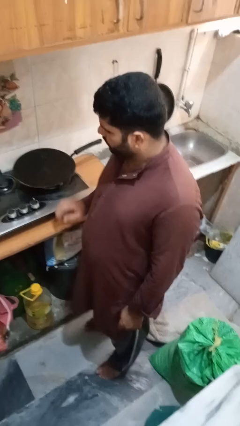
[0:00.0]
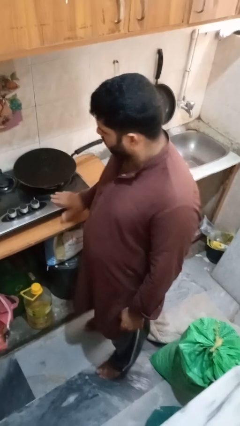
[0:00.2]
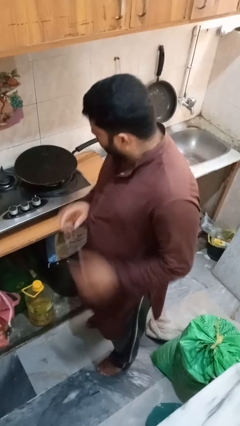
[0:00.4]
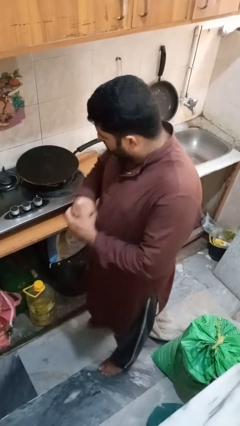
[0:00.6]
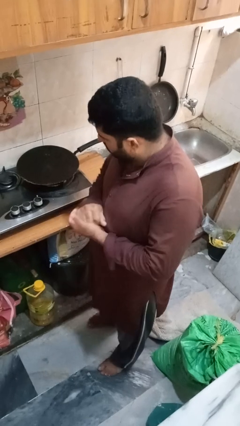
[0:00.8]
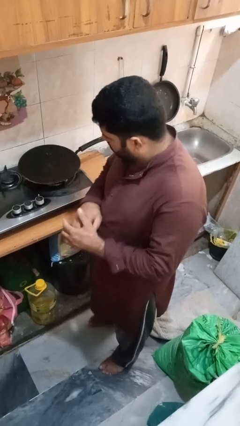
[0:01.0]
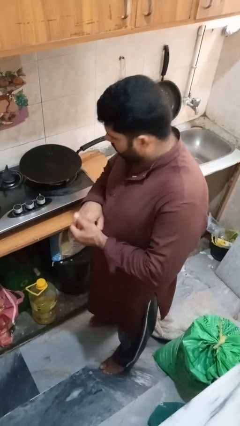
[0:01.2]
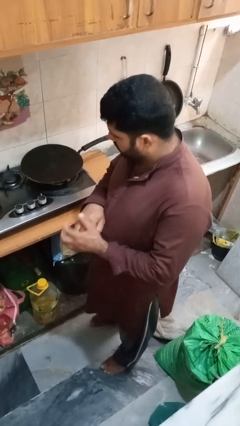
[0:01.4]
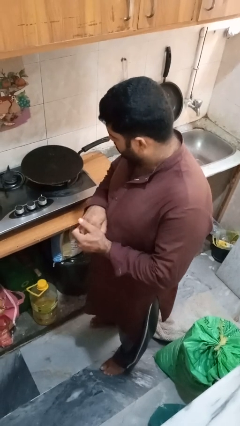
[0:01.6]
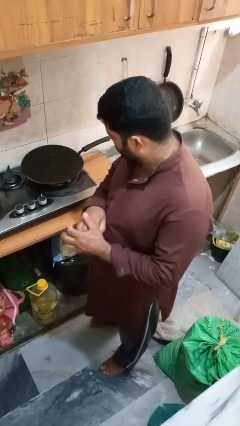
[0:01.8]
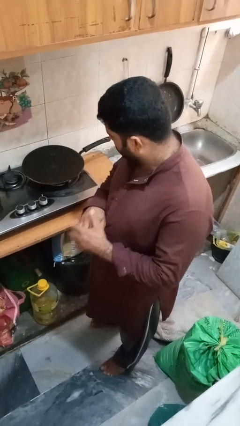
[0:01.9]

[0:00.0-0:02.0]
person burns hand

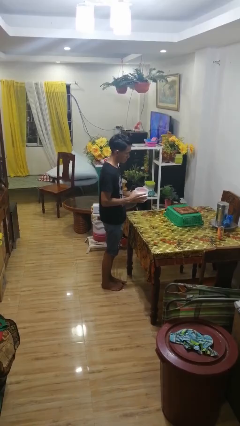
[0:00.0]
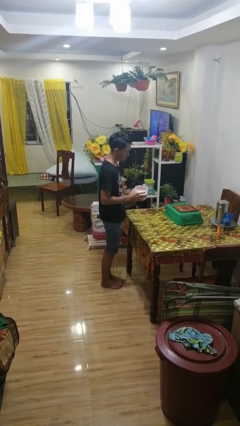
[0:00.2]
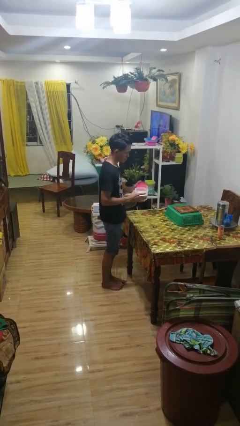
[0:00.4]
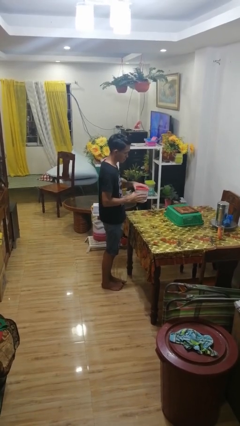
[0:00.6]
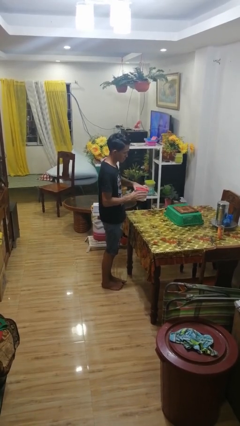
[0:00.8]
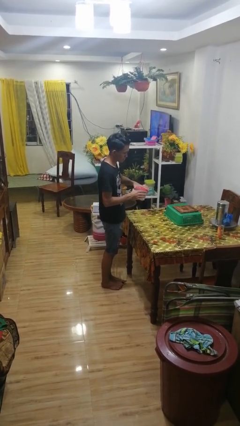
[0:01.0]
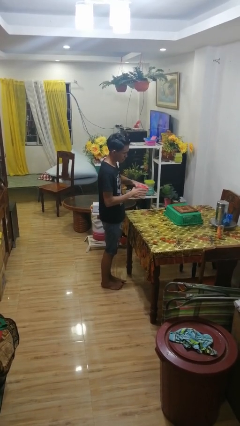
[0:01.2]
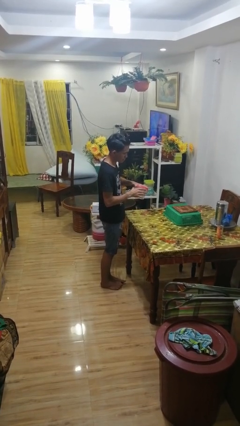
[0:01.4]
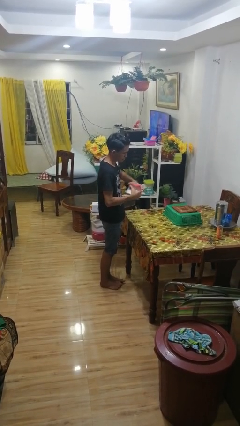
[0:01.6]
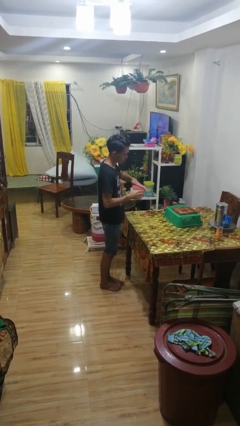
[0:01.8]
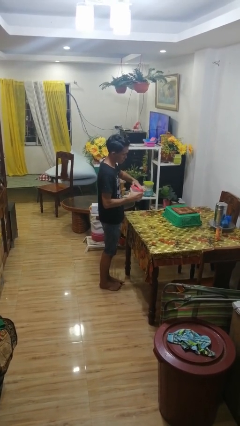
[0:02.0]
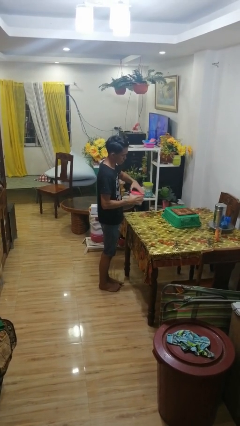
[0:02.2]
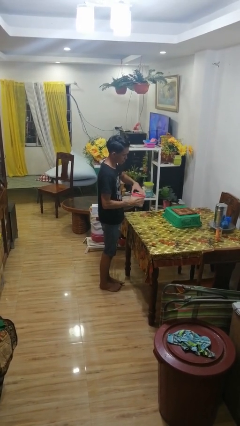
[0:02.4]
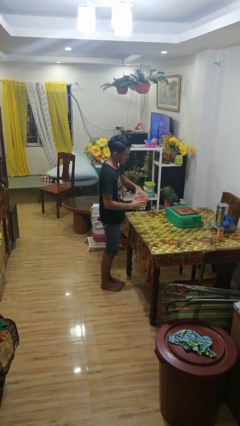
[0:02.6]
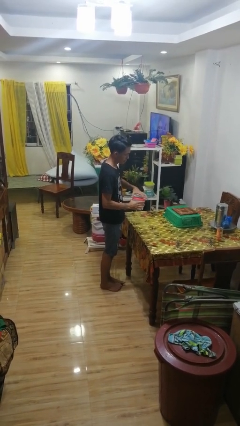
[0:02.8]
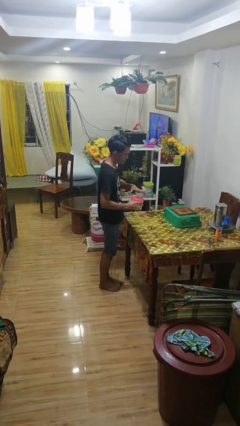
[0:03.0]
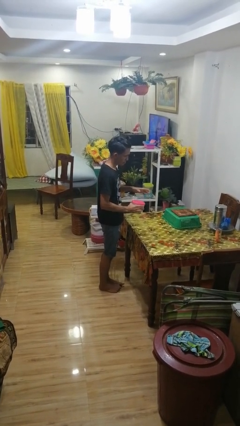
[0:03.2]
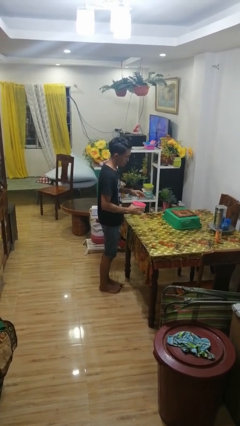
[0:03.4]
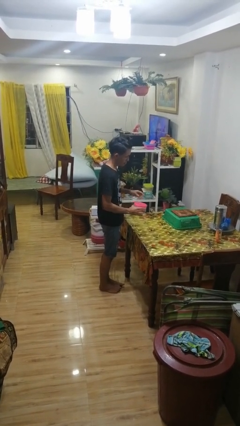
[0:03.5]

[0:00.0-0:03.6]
person closes jar

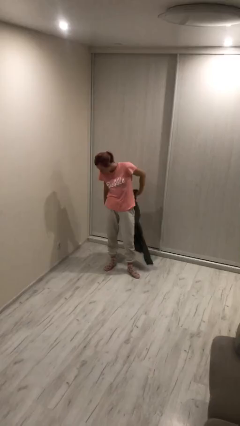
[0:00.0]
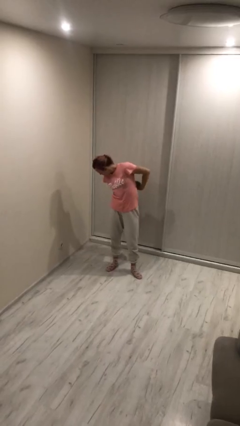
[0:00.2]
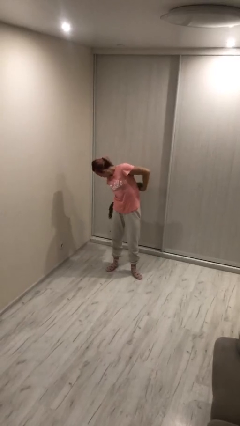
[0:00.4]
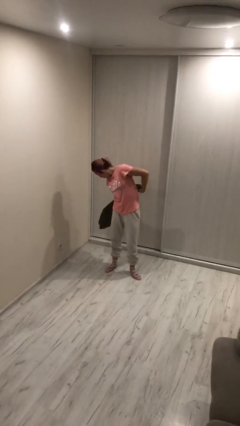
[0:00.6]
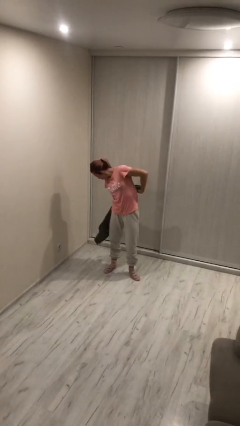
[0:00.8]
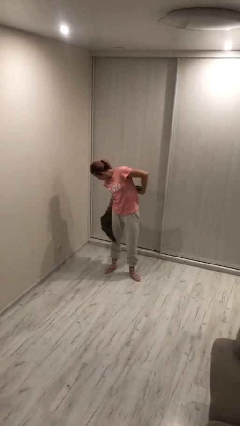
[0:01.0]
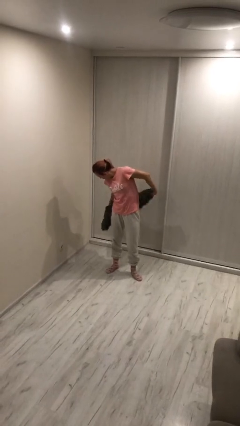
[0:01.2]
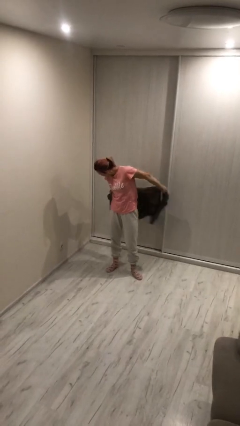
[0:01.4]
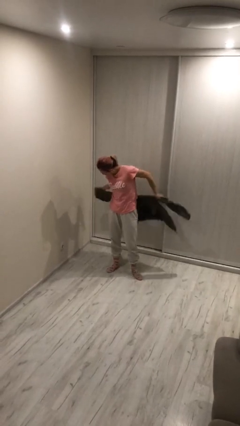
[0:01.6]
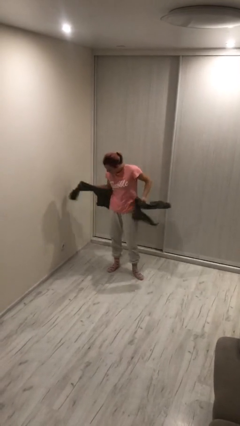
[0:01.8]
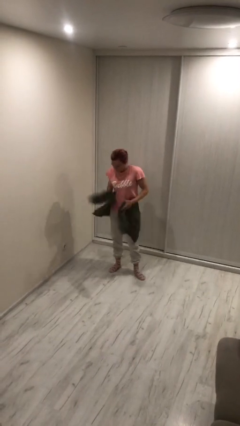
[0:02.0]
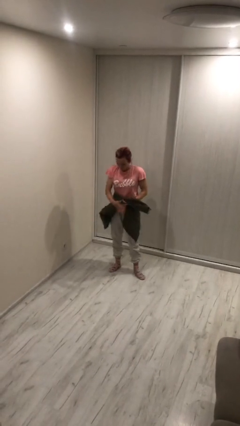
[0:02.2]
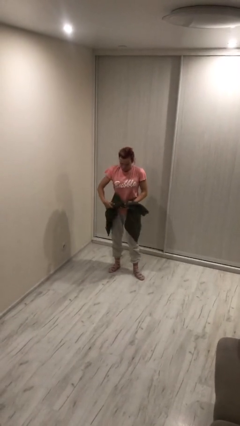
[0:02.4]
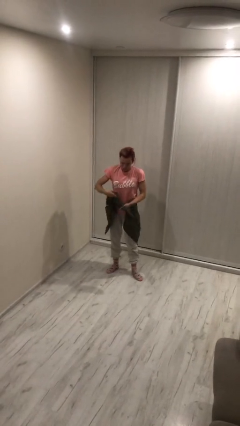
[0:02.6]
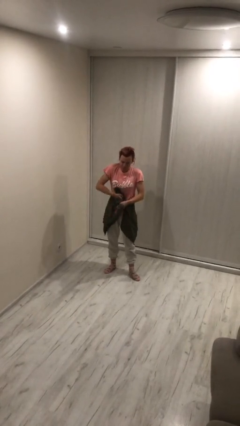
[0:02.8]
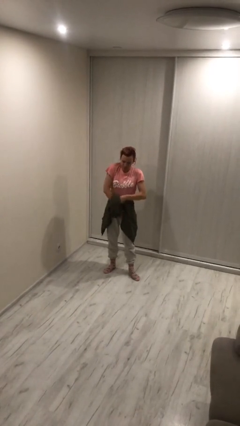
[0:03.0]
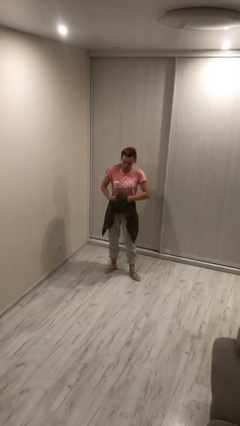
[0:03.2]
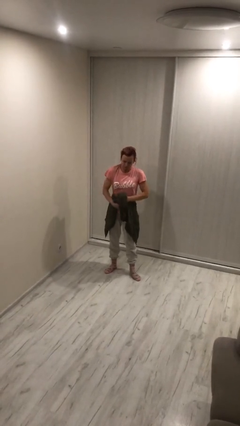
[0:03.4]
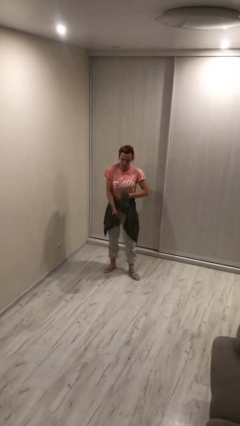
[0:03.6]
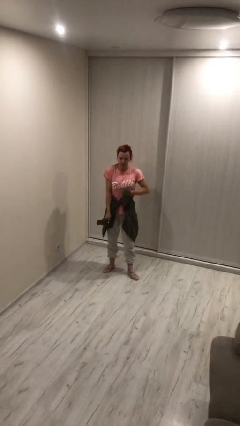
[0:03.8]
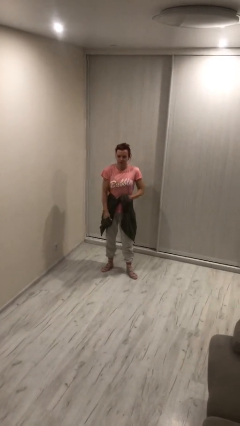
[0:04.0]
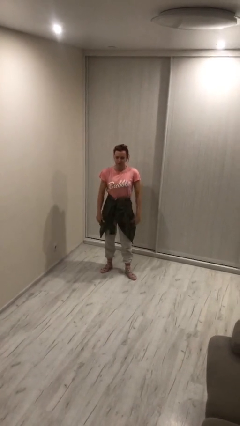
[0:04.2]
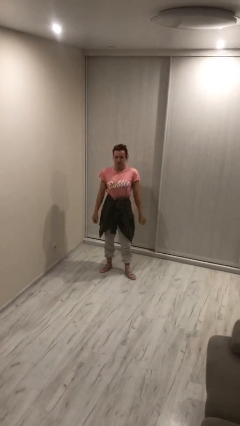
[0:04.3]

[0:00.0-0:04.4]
person ties jacket around waist

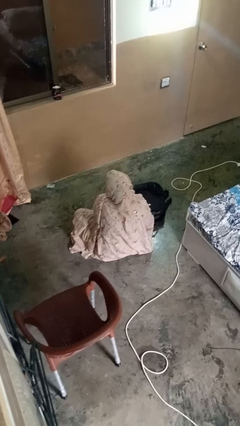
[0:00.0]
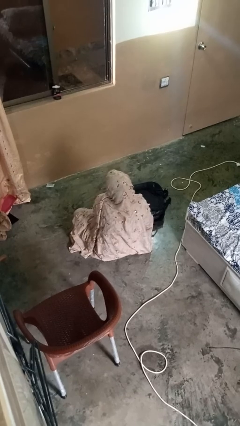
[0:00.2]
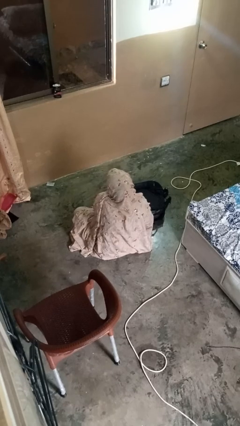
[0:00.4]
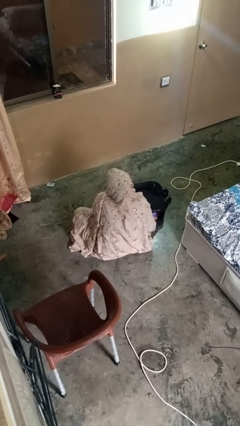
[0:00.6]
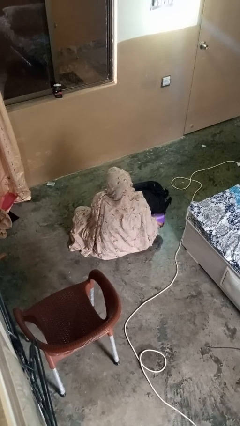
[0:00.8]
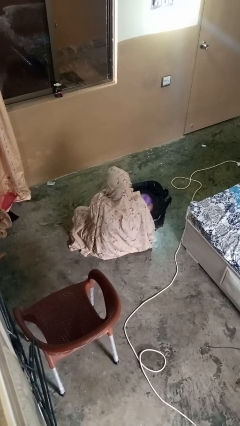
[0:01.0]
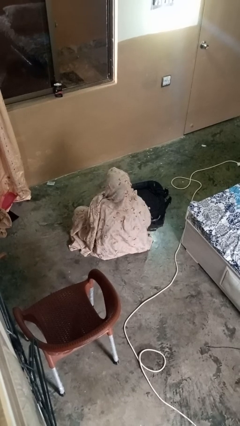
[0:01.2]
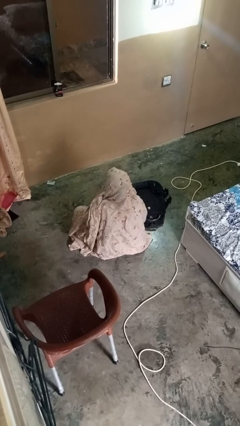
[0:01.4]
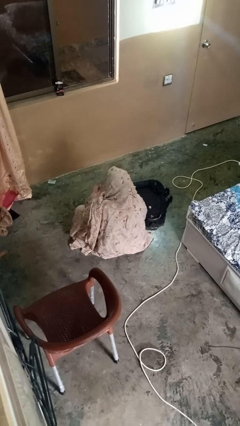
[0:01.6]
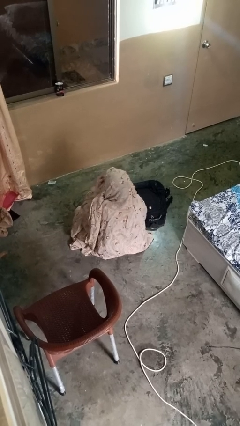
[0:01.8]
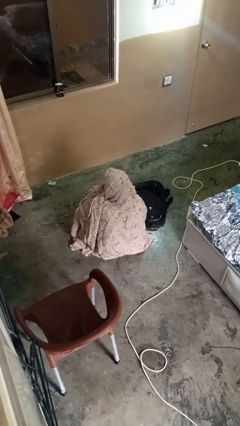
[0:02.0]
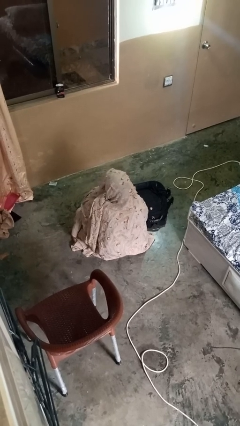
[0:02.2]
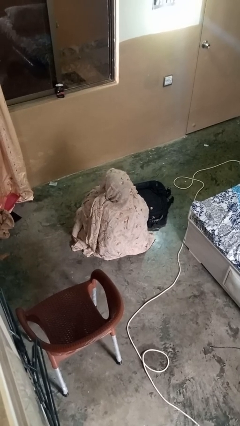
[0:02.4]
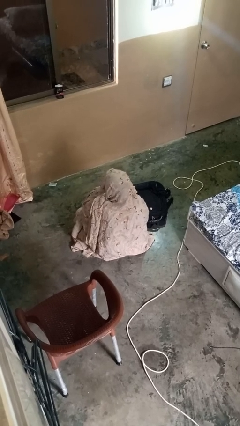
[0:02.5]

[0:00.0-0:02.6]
person eats snack from bag

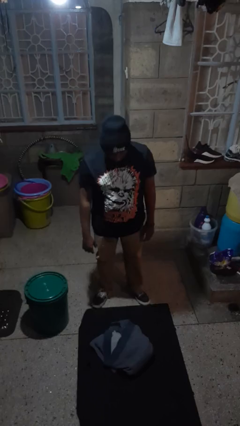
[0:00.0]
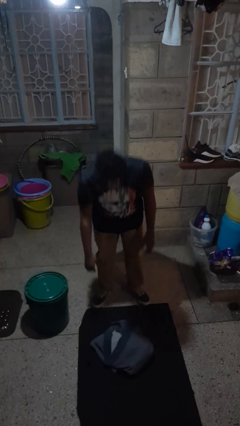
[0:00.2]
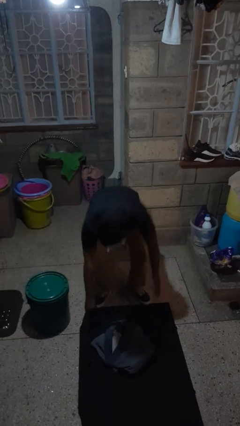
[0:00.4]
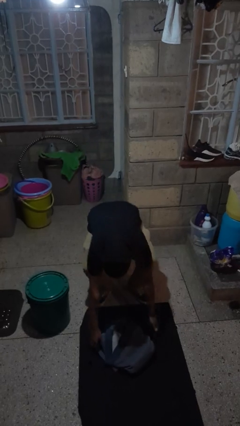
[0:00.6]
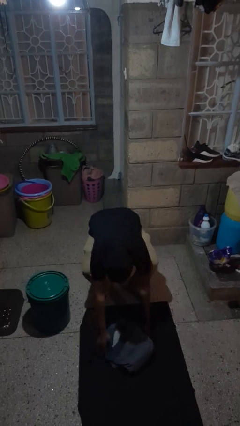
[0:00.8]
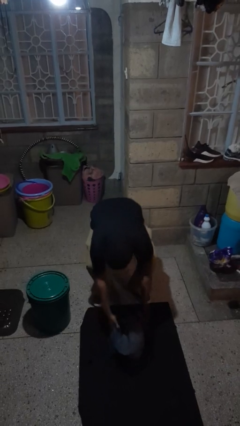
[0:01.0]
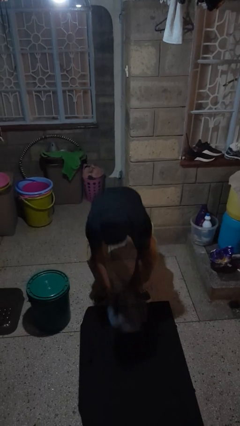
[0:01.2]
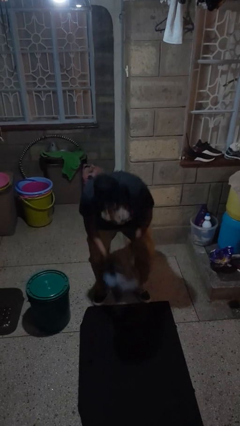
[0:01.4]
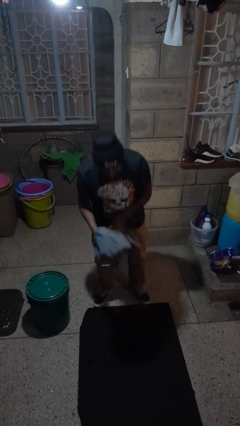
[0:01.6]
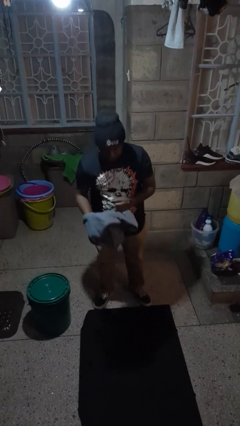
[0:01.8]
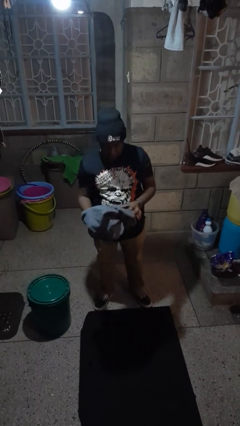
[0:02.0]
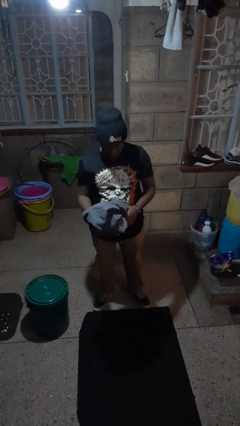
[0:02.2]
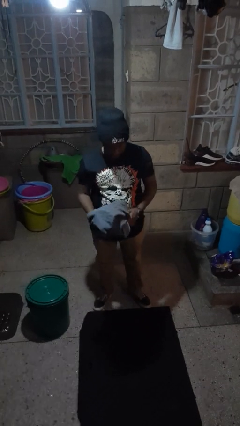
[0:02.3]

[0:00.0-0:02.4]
person picks up object from floor

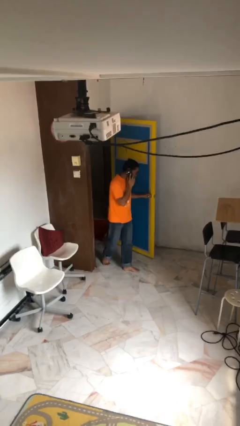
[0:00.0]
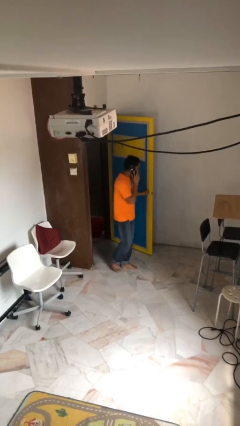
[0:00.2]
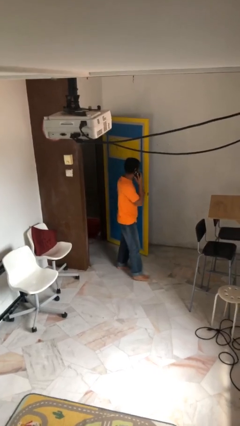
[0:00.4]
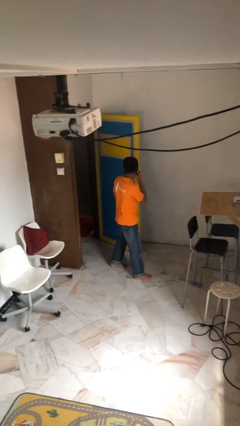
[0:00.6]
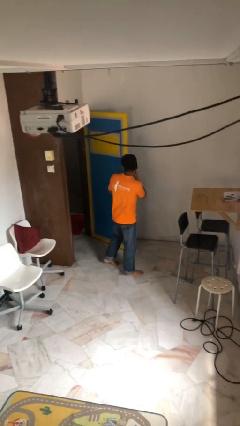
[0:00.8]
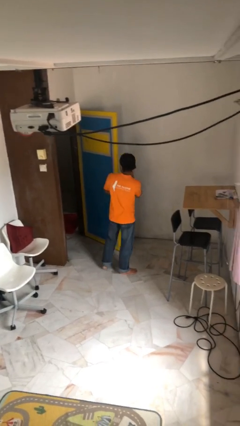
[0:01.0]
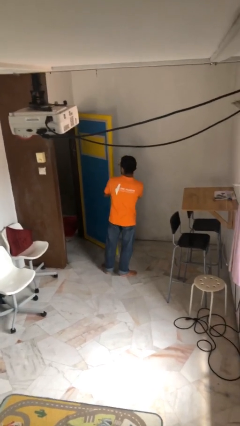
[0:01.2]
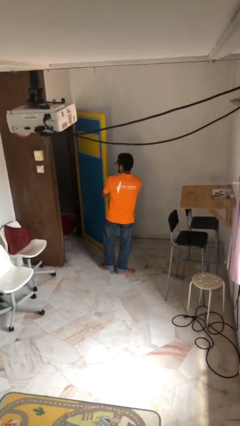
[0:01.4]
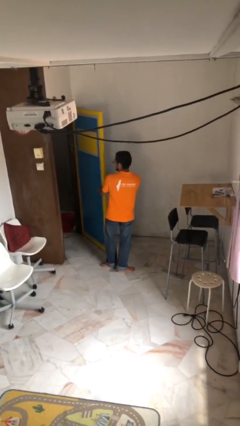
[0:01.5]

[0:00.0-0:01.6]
person enters scene through structure

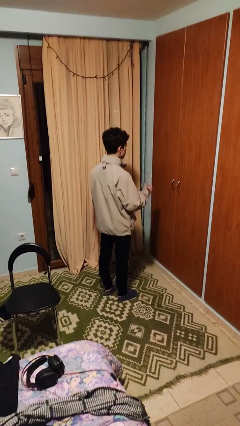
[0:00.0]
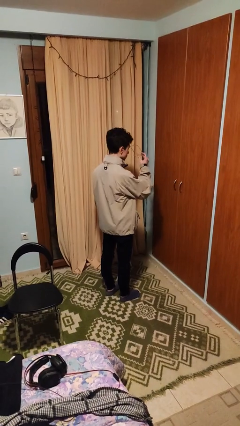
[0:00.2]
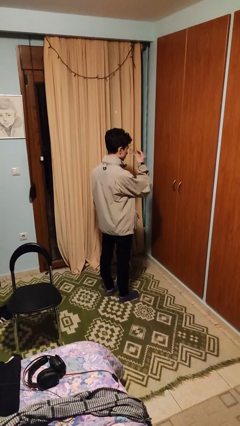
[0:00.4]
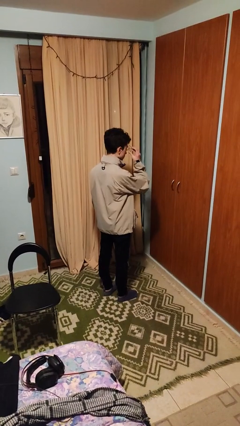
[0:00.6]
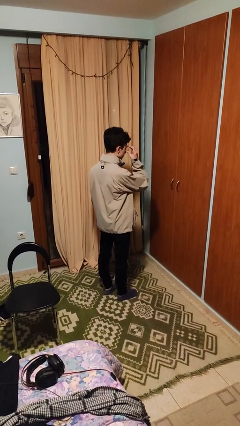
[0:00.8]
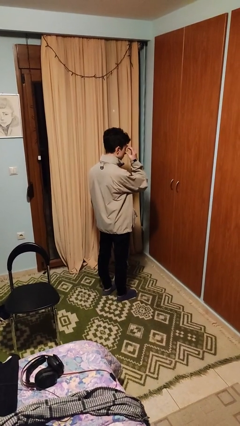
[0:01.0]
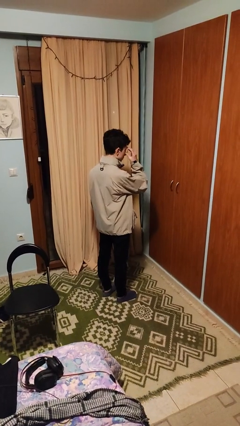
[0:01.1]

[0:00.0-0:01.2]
person puts on glasses
